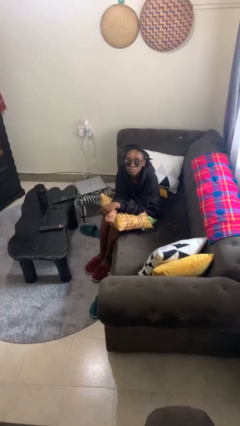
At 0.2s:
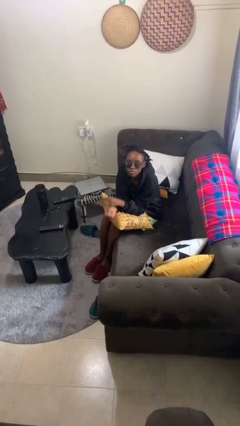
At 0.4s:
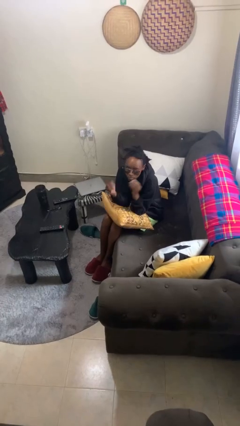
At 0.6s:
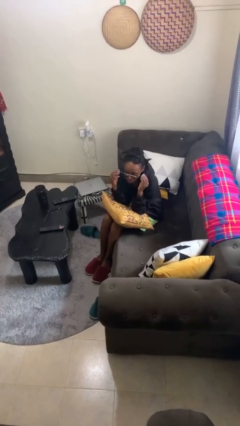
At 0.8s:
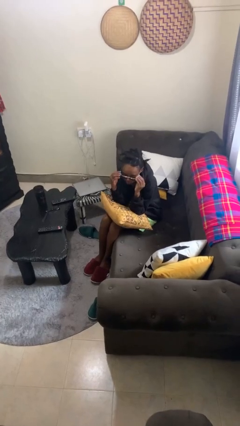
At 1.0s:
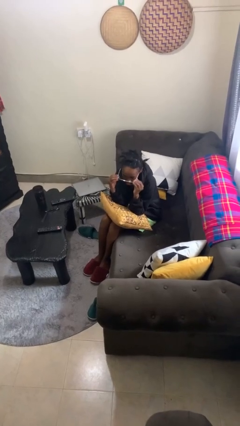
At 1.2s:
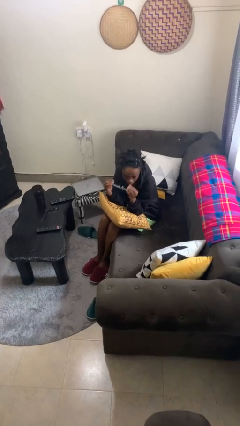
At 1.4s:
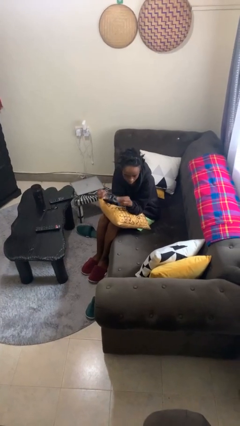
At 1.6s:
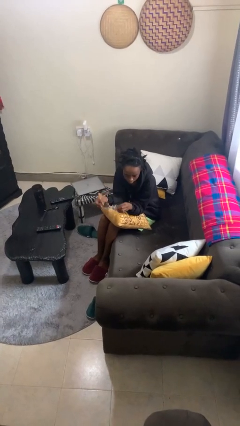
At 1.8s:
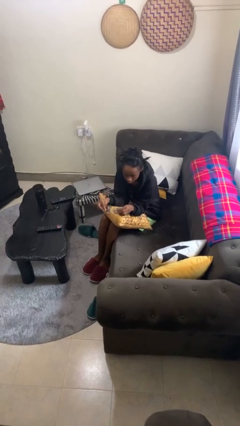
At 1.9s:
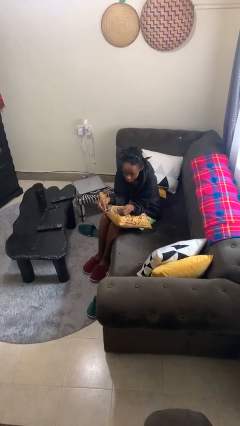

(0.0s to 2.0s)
person takes off sunglasses

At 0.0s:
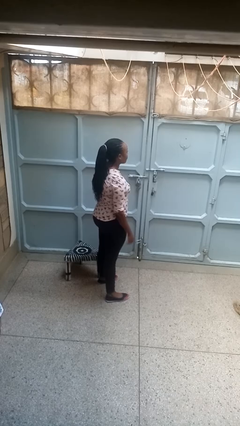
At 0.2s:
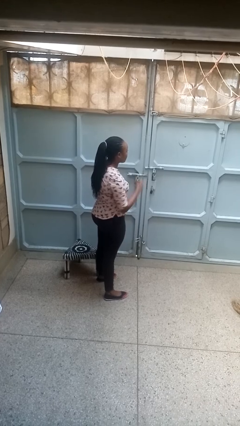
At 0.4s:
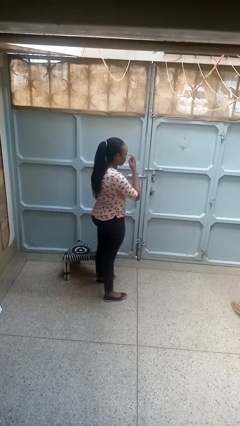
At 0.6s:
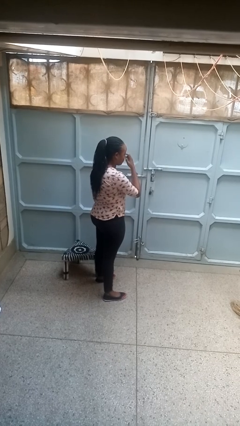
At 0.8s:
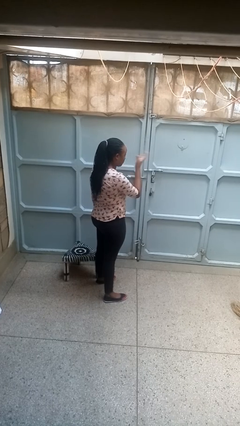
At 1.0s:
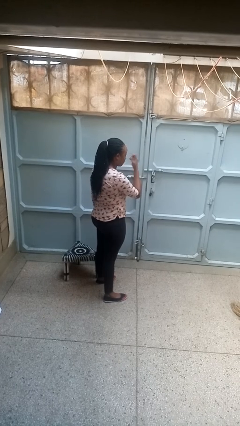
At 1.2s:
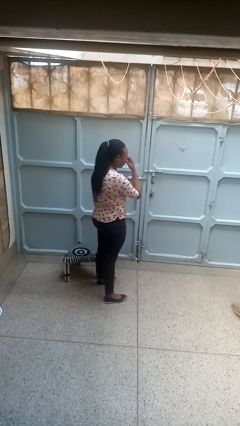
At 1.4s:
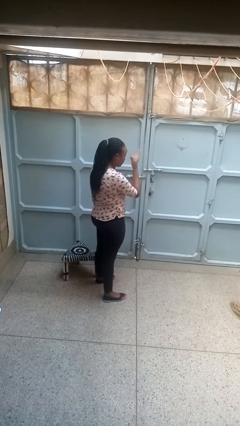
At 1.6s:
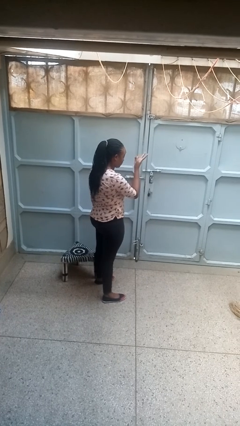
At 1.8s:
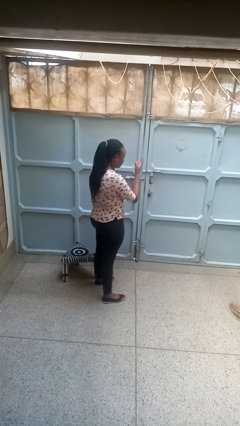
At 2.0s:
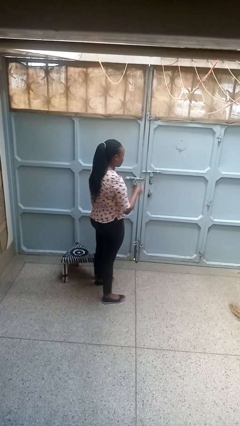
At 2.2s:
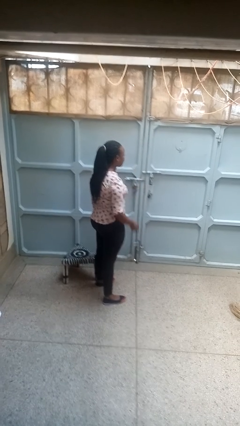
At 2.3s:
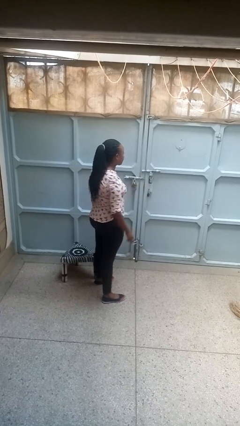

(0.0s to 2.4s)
person gestures watch closely

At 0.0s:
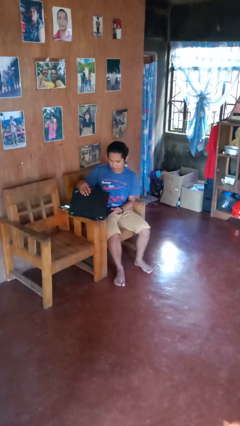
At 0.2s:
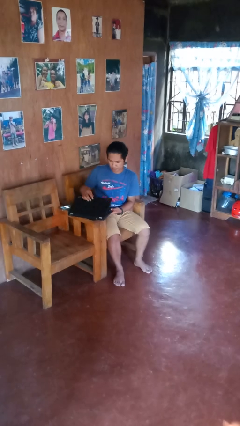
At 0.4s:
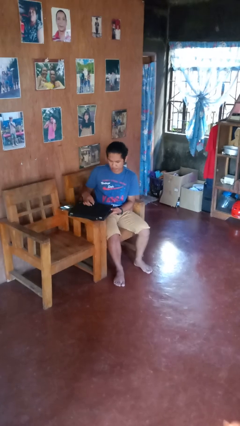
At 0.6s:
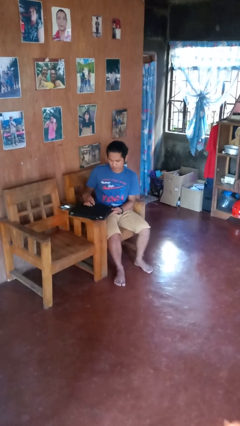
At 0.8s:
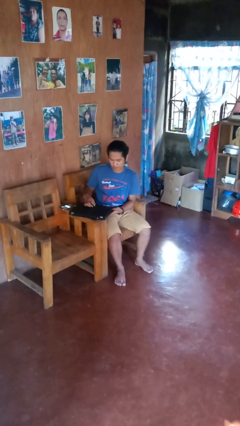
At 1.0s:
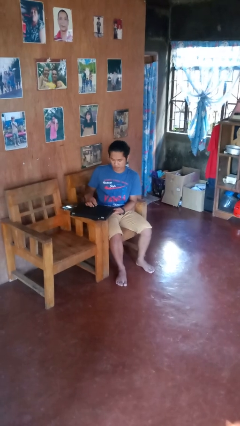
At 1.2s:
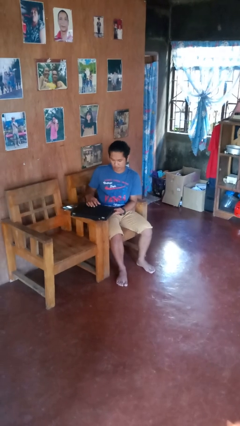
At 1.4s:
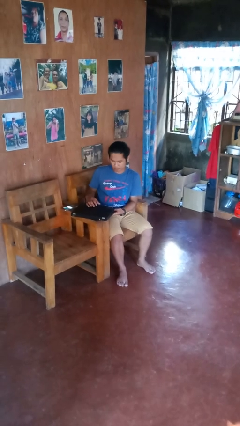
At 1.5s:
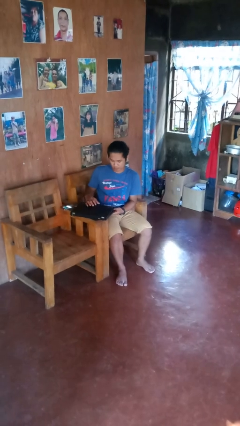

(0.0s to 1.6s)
person closes laptop

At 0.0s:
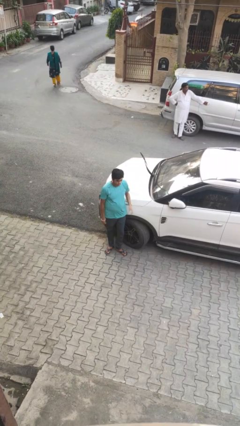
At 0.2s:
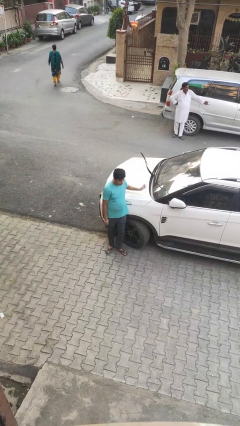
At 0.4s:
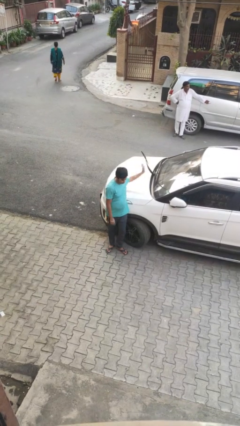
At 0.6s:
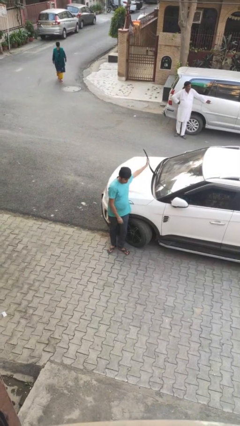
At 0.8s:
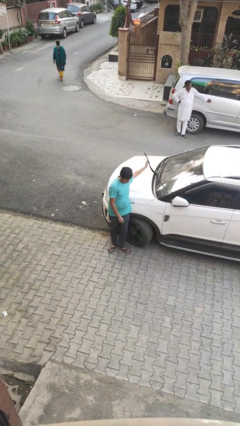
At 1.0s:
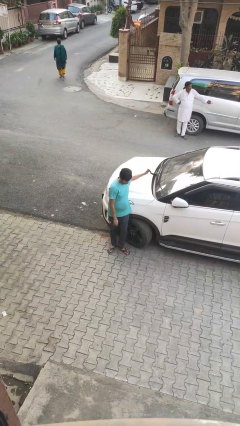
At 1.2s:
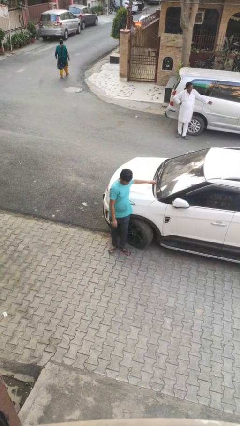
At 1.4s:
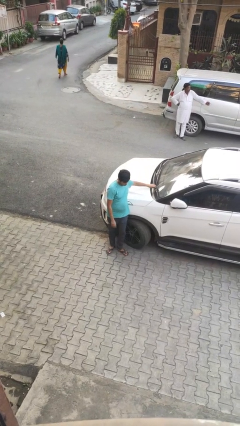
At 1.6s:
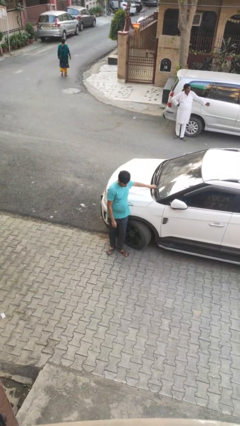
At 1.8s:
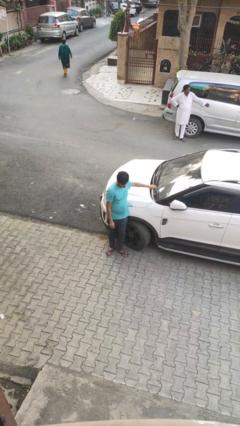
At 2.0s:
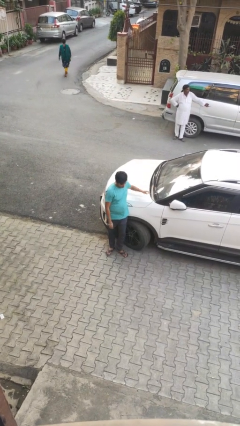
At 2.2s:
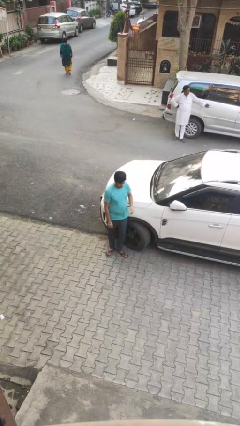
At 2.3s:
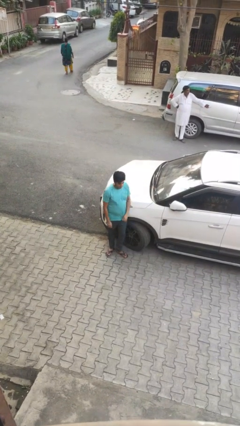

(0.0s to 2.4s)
person flips down car wipers

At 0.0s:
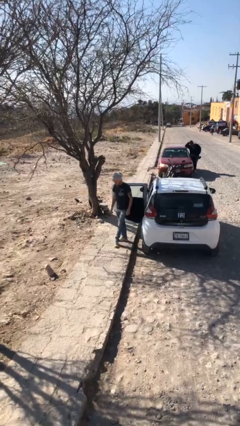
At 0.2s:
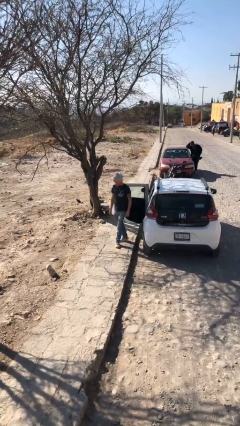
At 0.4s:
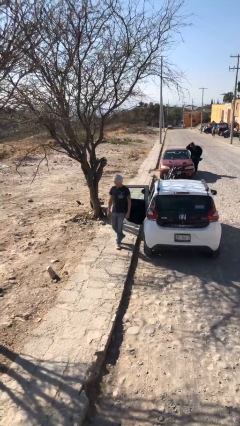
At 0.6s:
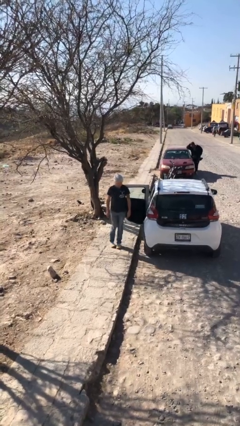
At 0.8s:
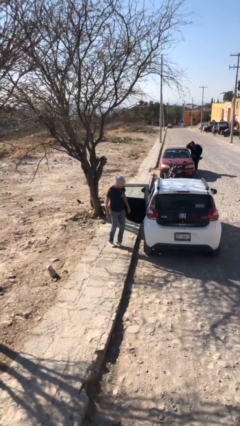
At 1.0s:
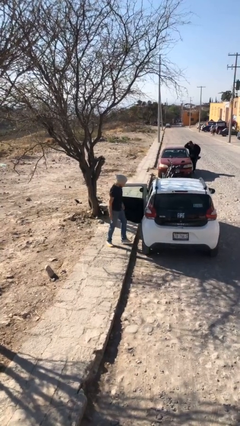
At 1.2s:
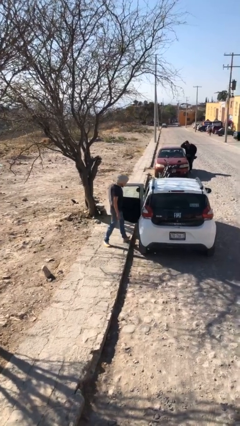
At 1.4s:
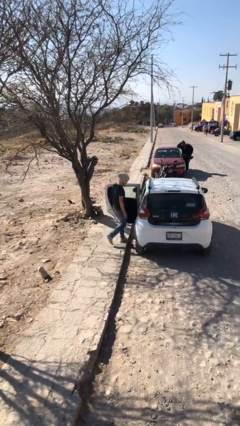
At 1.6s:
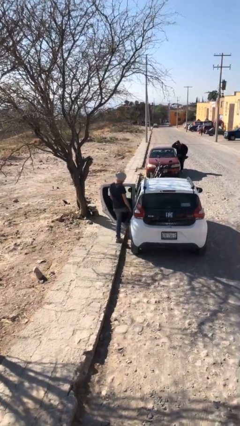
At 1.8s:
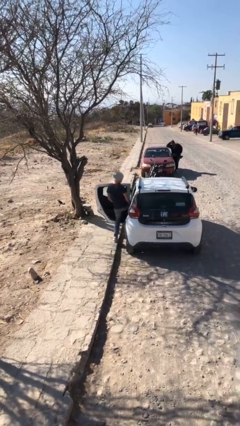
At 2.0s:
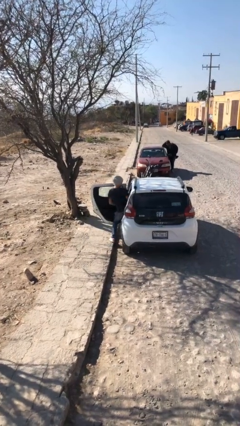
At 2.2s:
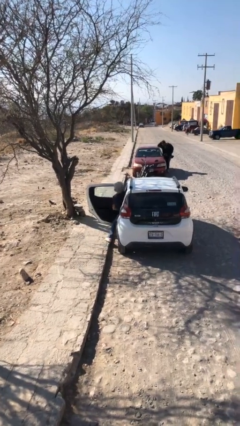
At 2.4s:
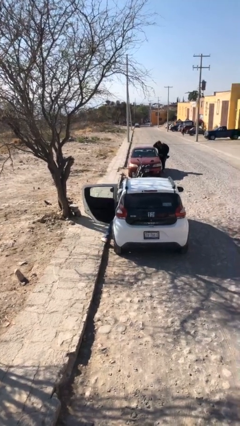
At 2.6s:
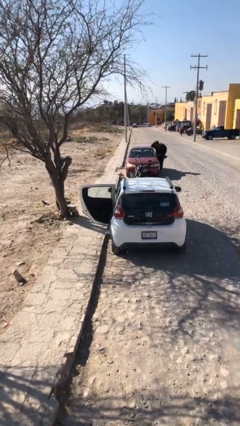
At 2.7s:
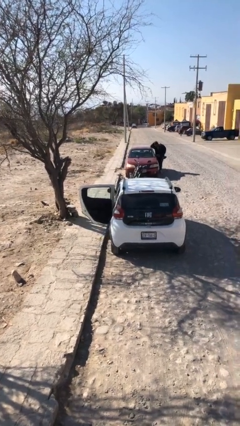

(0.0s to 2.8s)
person enters car

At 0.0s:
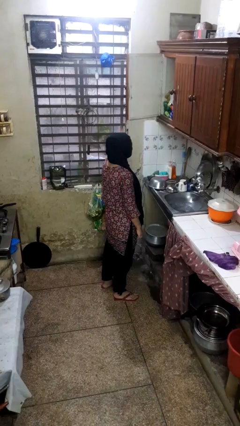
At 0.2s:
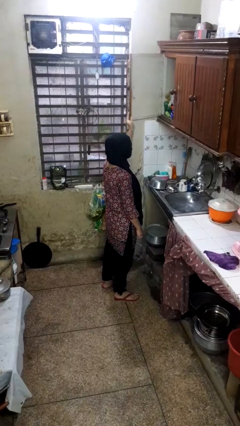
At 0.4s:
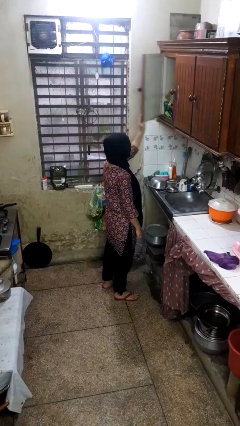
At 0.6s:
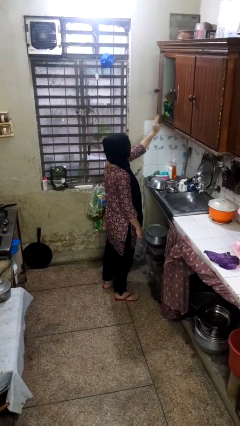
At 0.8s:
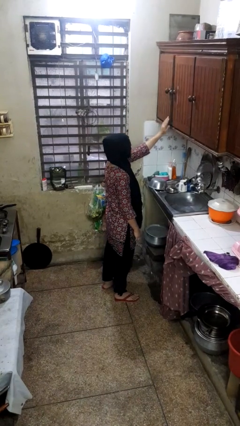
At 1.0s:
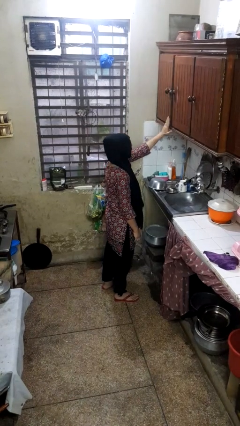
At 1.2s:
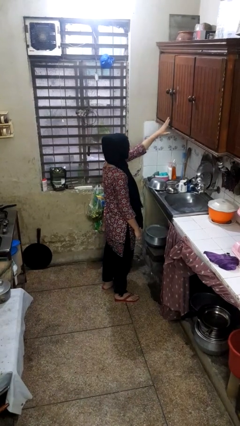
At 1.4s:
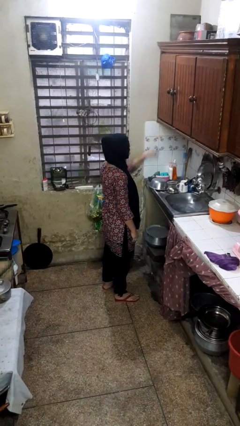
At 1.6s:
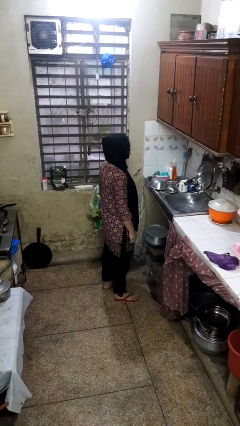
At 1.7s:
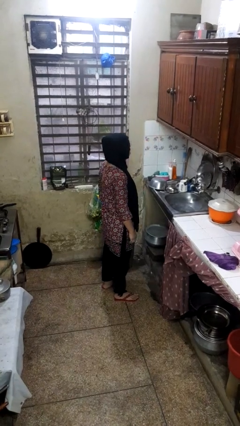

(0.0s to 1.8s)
person closes cabinet

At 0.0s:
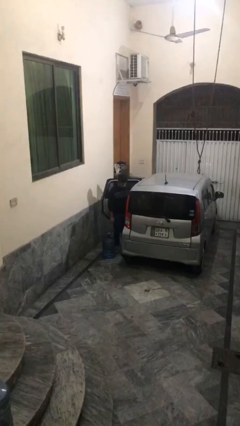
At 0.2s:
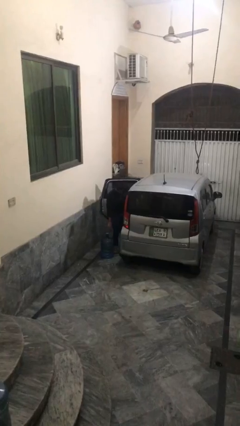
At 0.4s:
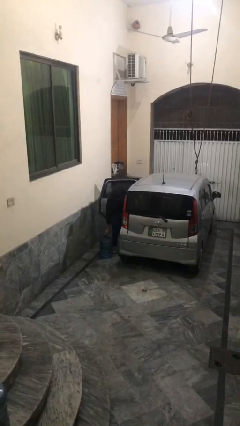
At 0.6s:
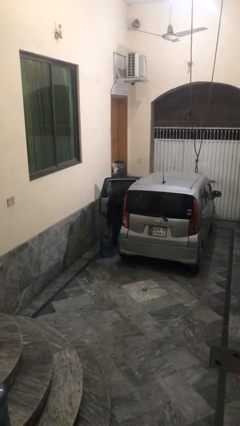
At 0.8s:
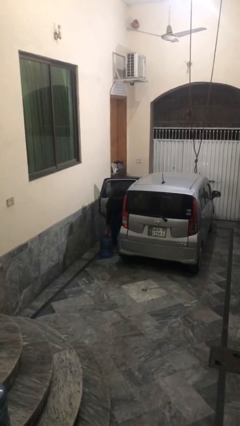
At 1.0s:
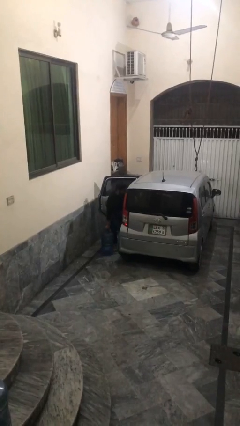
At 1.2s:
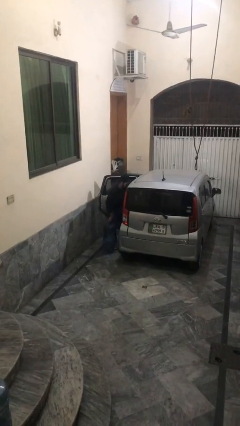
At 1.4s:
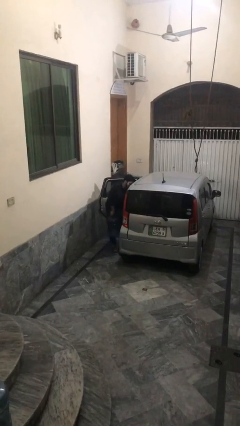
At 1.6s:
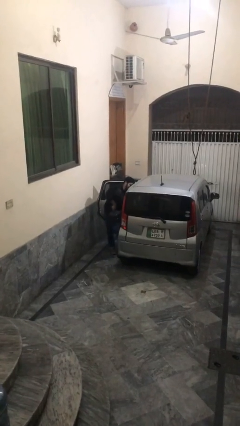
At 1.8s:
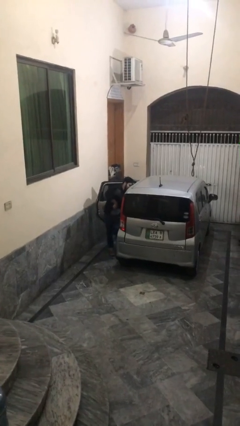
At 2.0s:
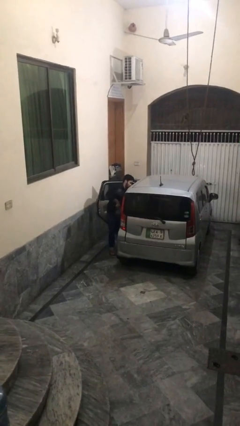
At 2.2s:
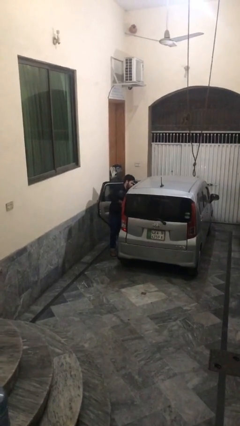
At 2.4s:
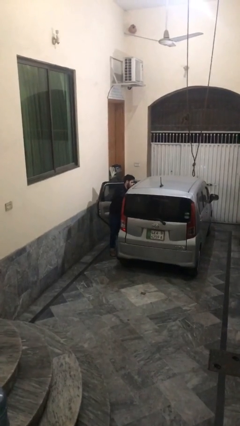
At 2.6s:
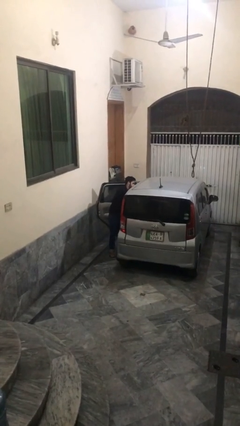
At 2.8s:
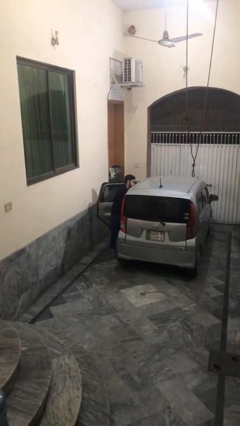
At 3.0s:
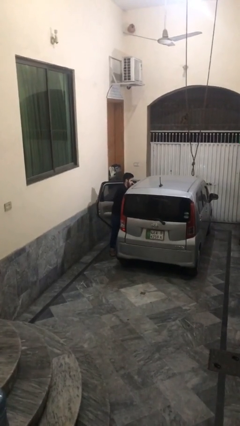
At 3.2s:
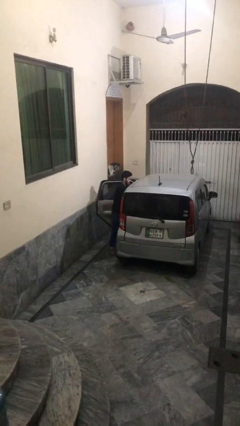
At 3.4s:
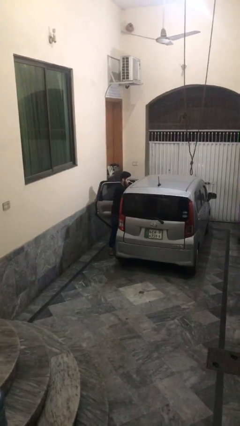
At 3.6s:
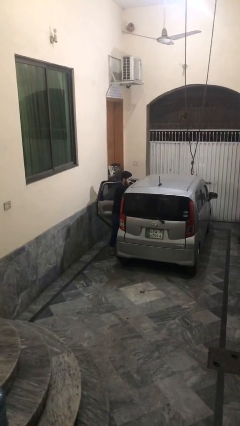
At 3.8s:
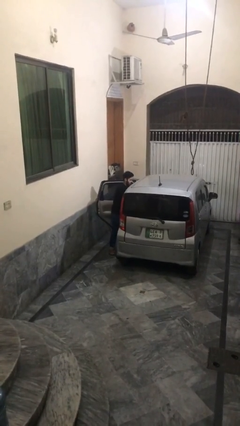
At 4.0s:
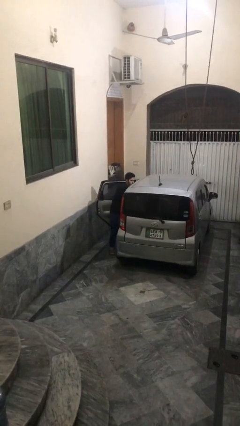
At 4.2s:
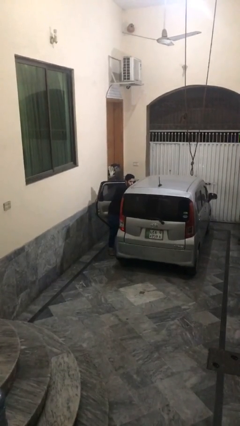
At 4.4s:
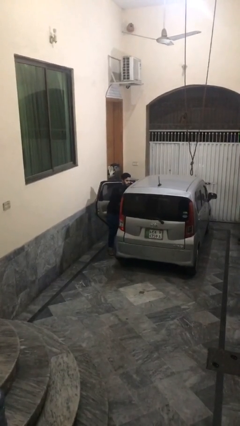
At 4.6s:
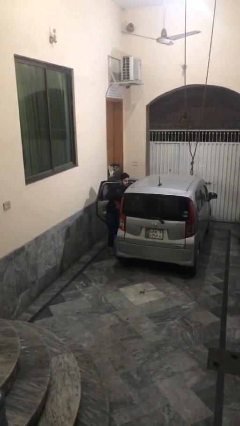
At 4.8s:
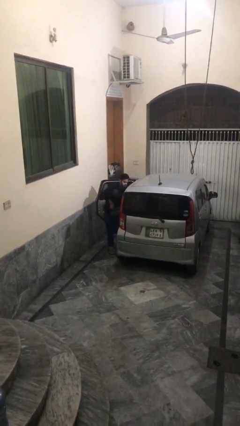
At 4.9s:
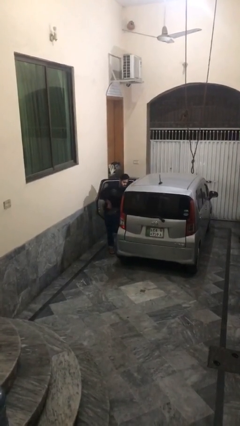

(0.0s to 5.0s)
person loads car
